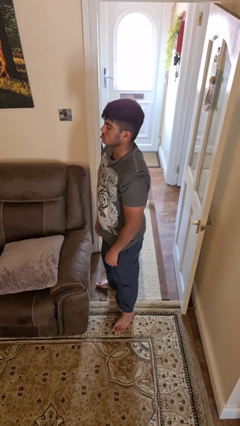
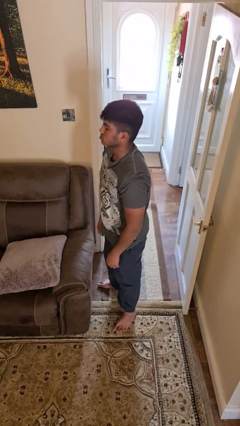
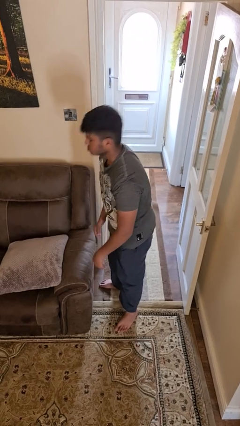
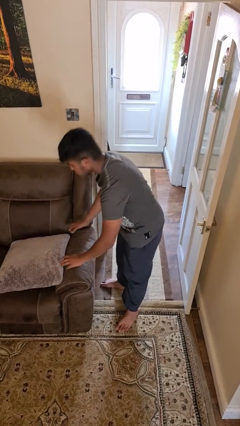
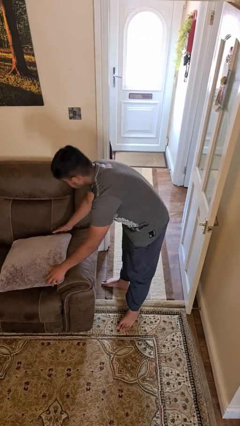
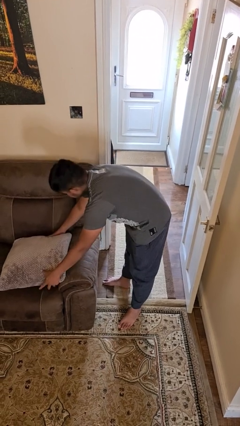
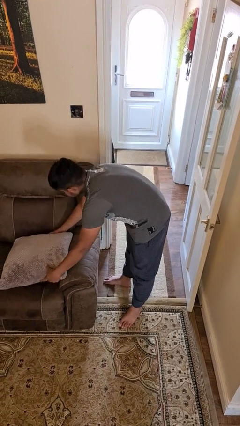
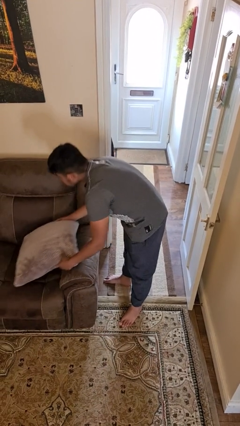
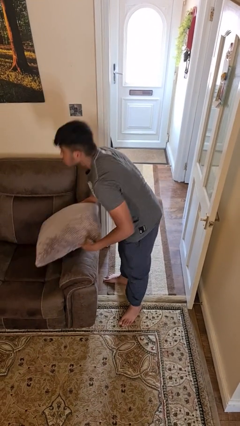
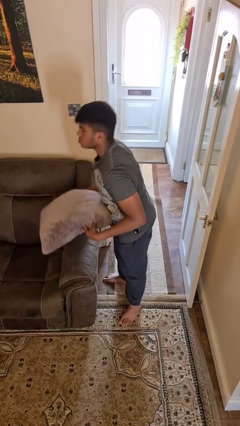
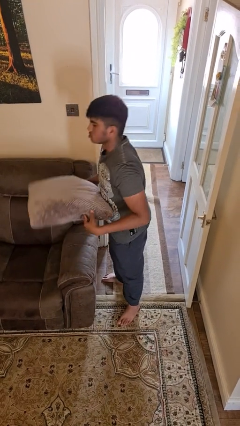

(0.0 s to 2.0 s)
person picks up object from couch

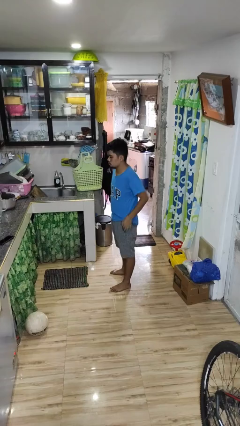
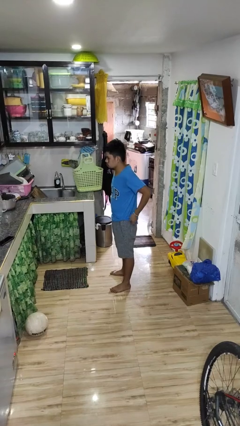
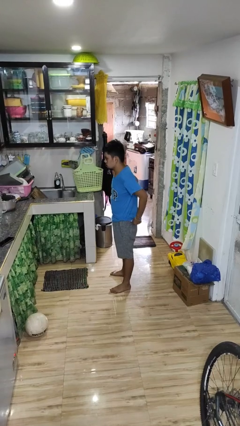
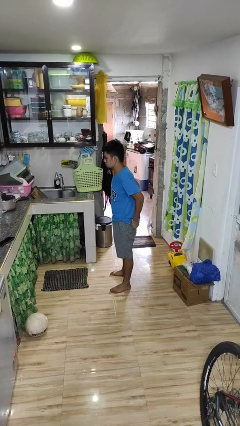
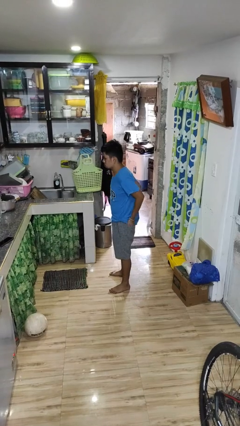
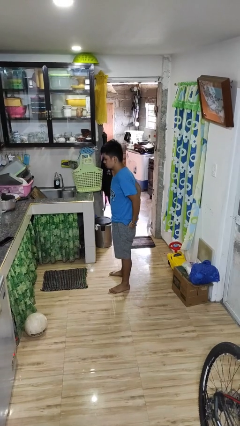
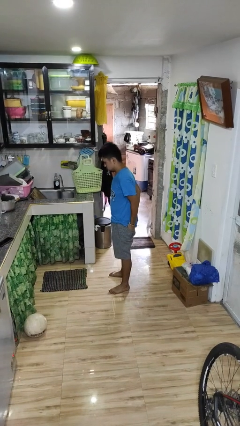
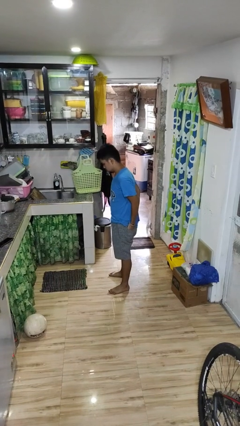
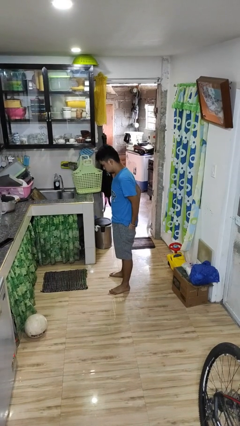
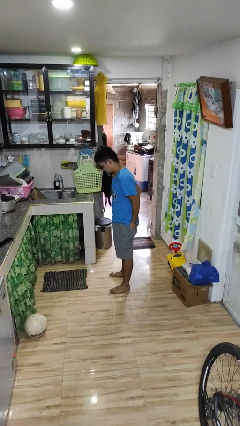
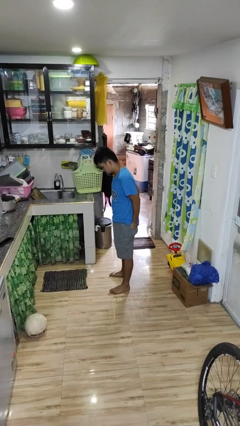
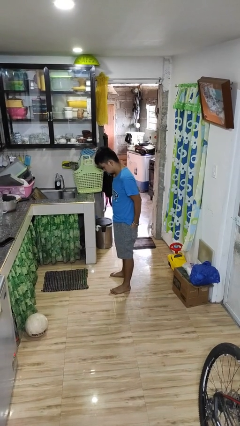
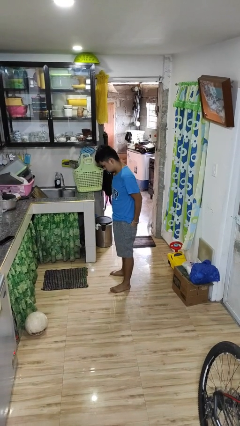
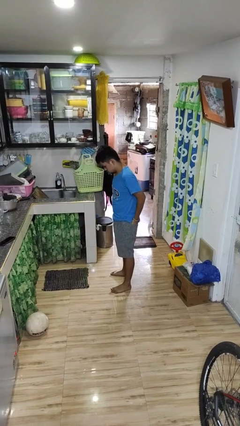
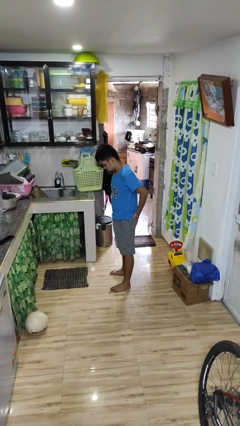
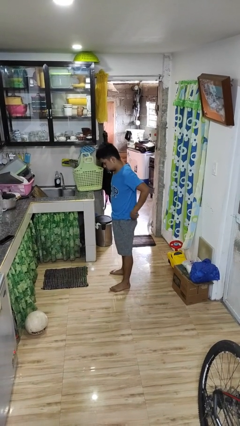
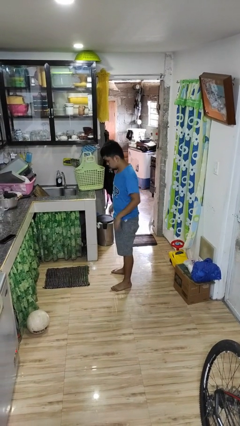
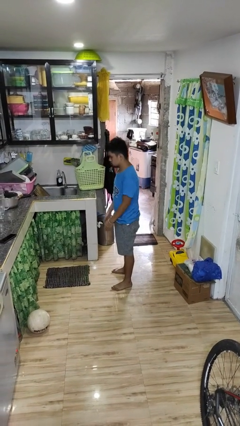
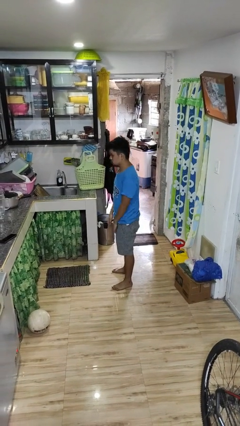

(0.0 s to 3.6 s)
person puts hands in back pockets

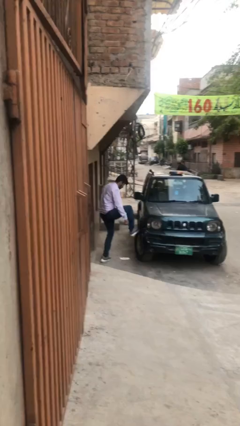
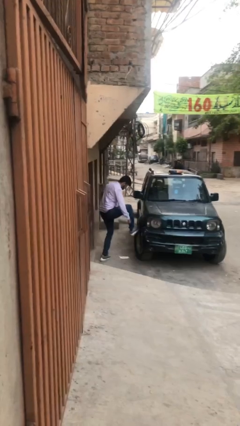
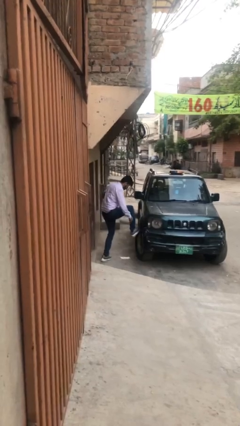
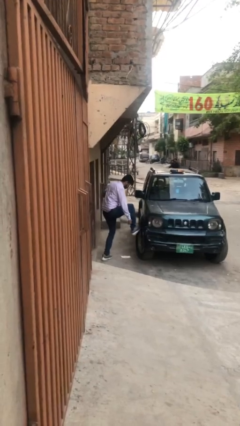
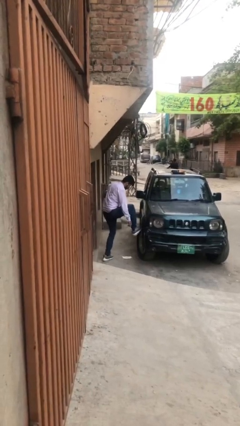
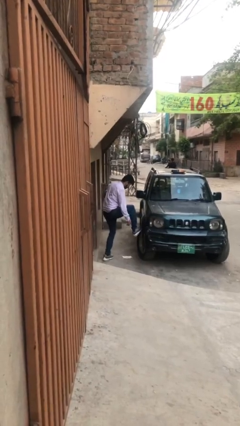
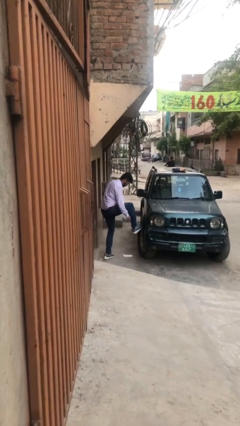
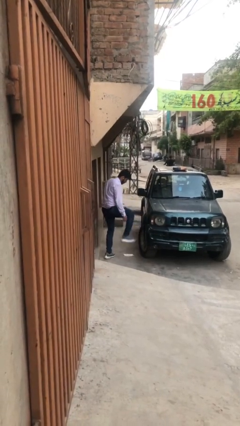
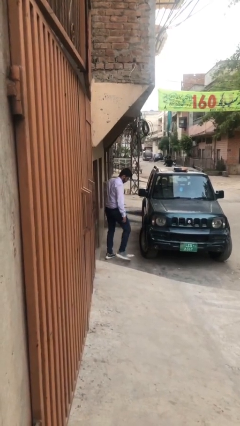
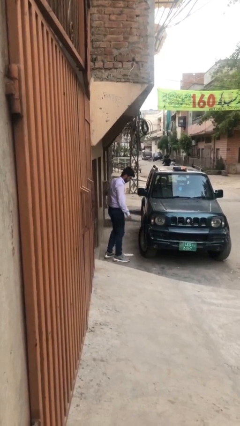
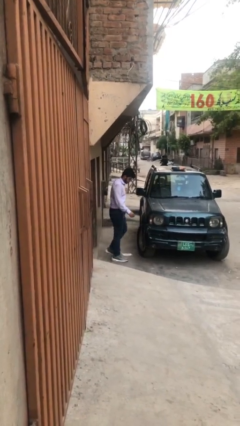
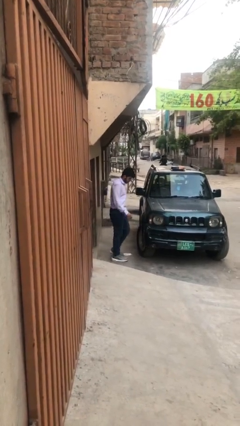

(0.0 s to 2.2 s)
person kicks car tires

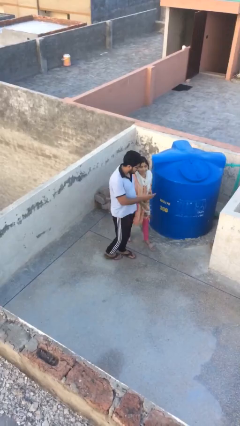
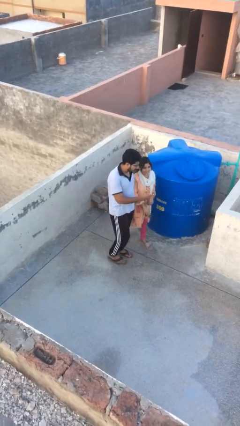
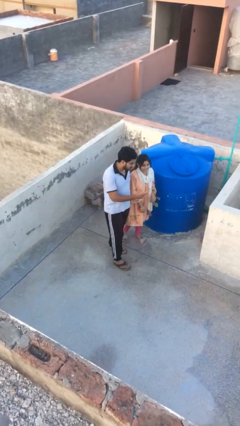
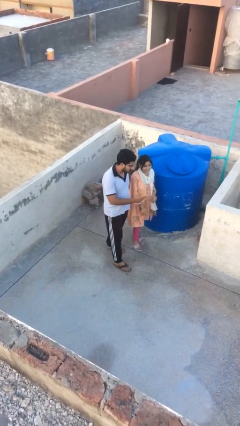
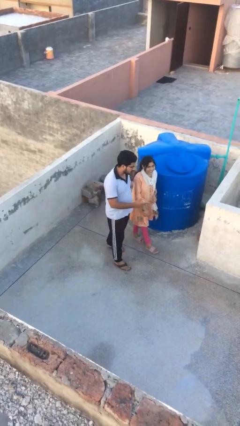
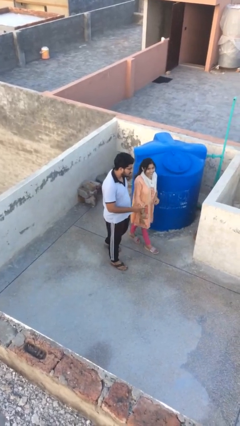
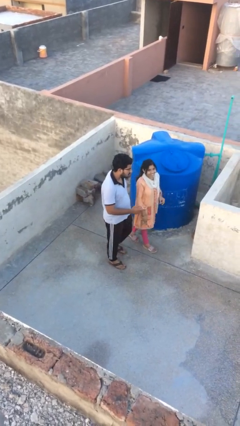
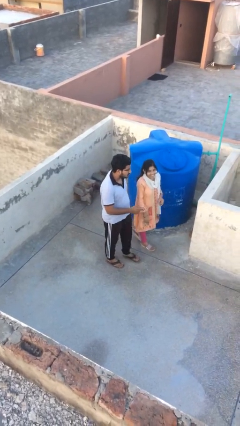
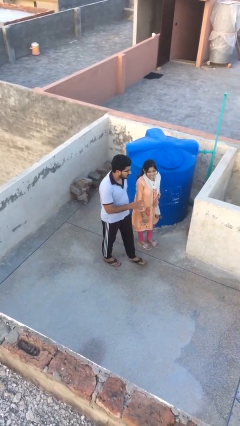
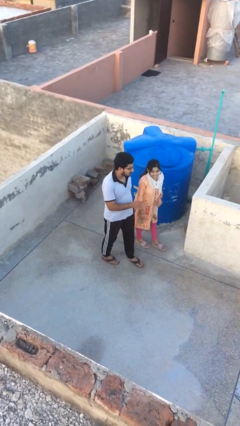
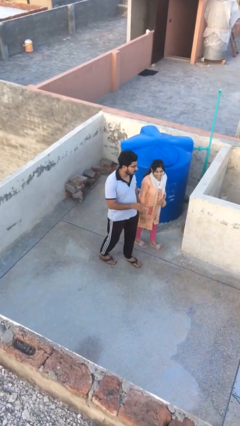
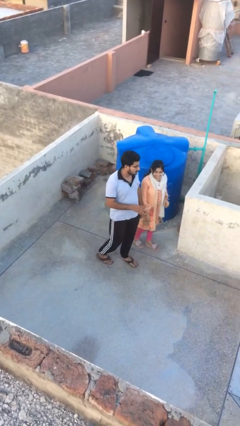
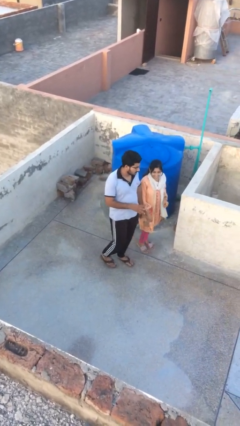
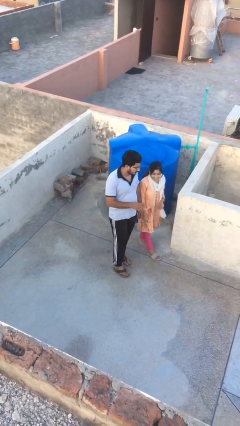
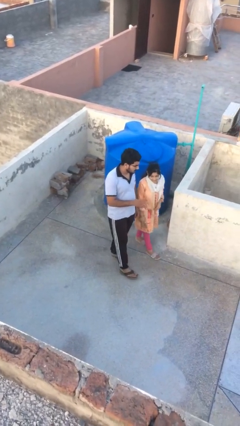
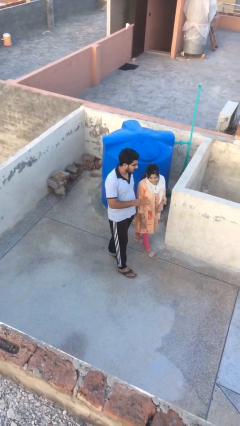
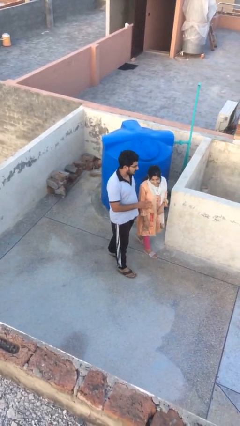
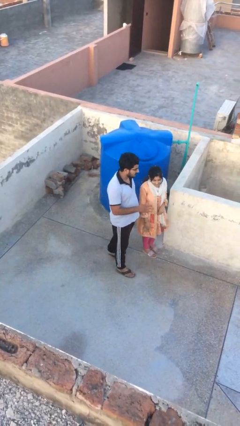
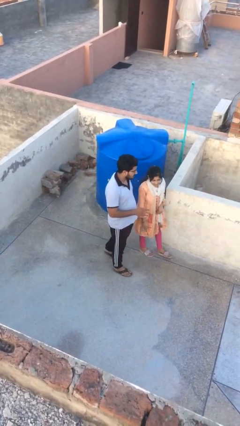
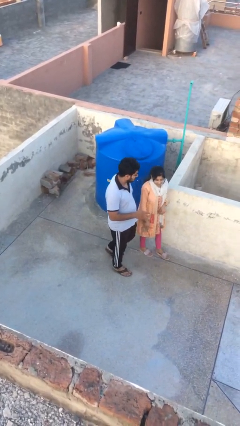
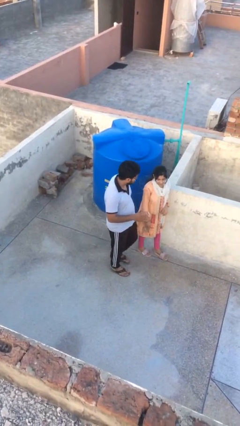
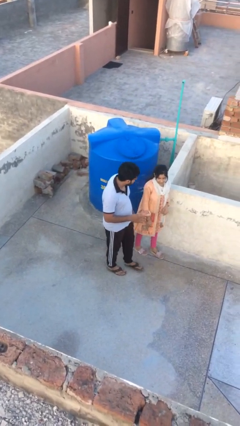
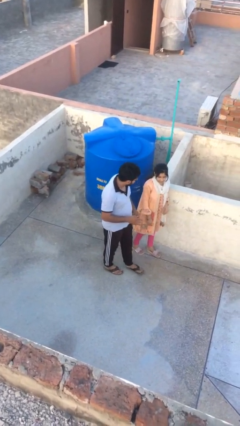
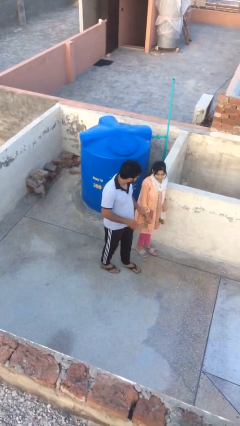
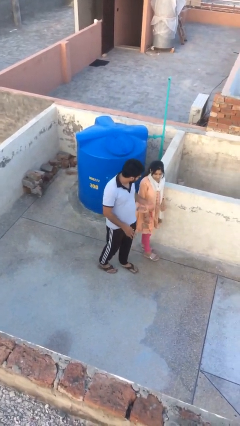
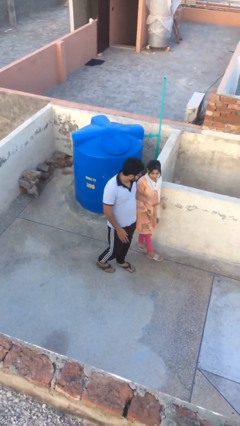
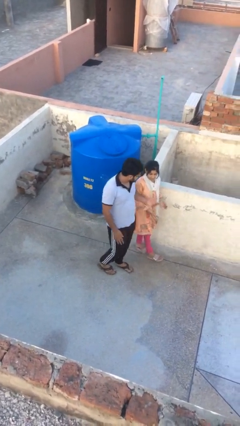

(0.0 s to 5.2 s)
person talks to person

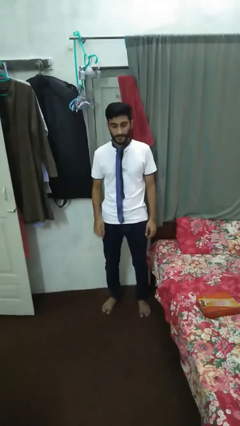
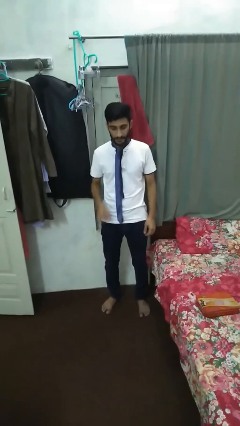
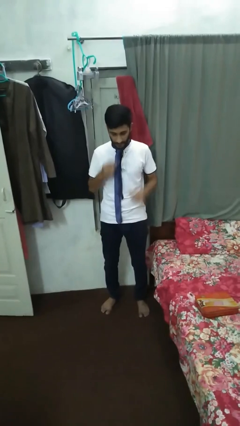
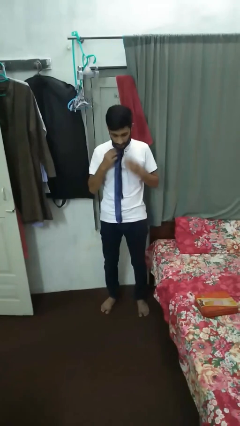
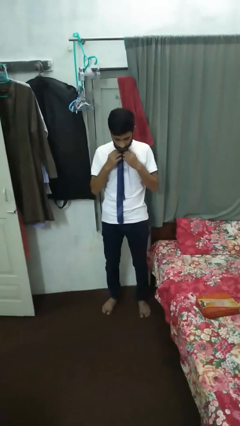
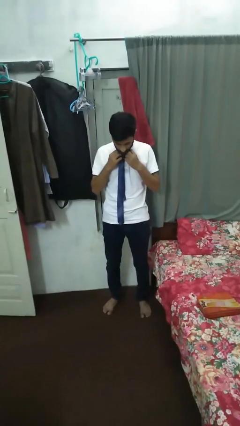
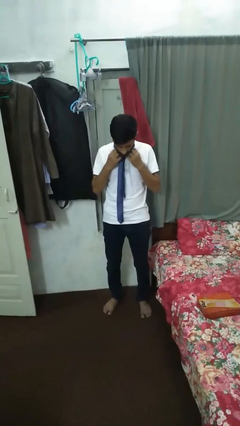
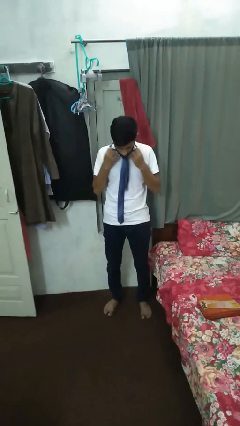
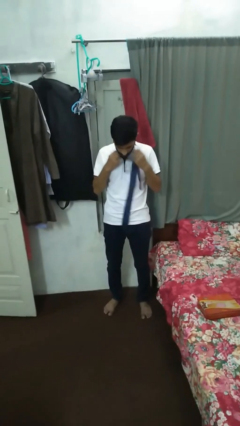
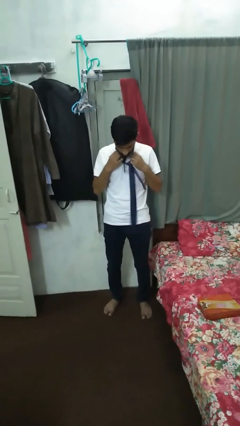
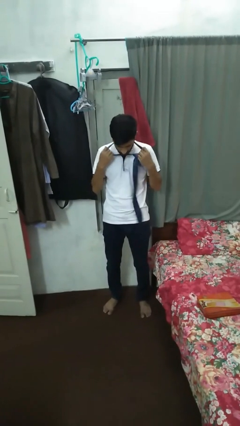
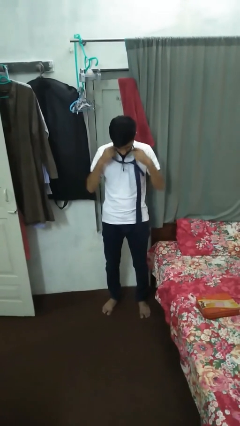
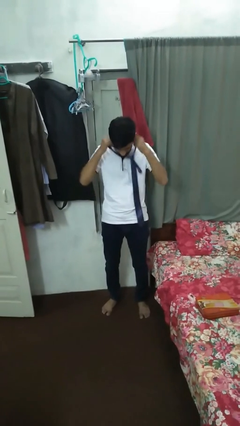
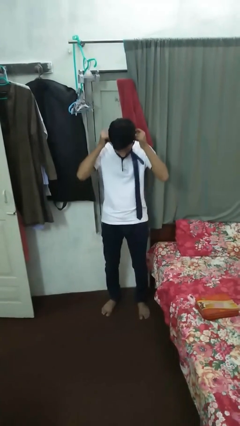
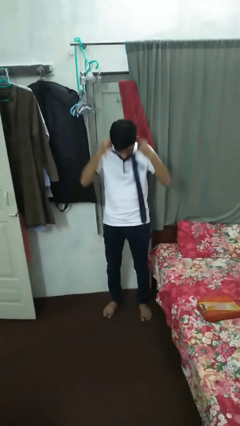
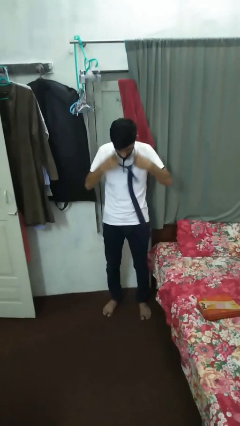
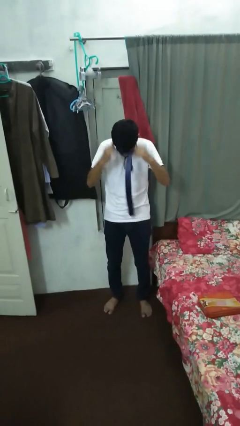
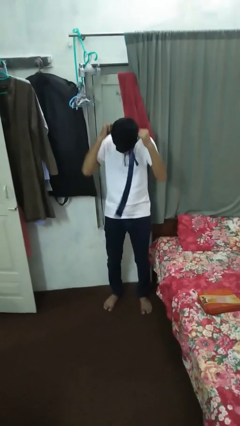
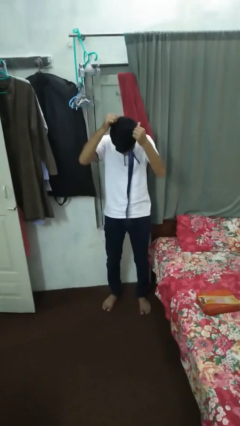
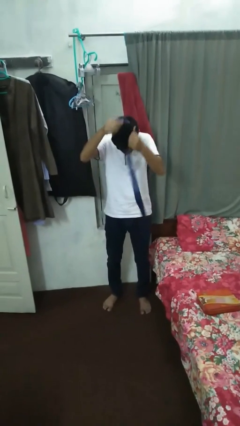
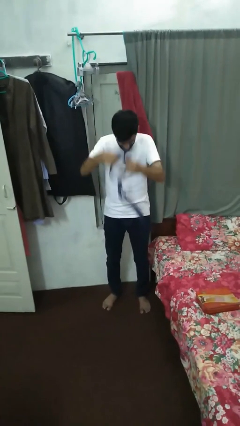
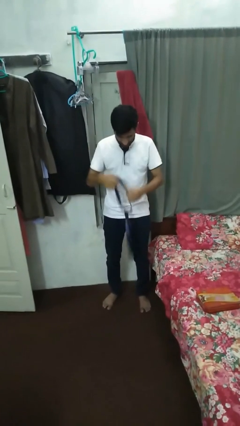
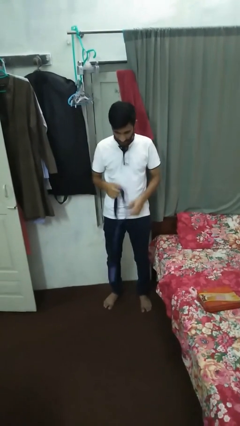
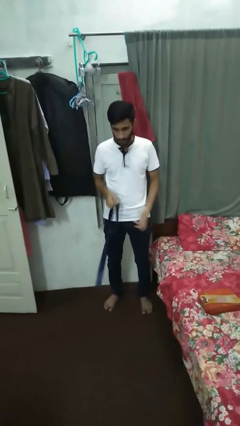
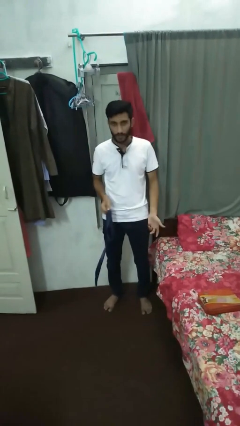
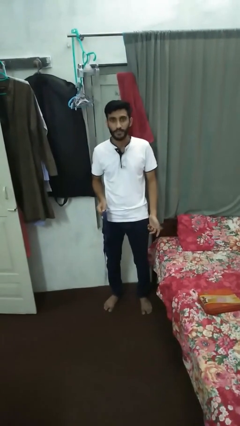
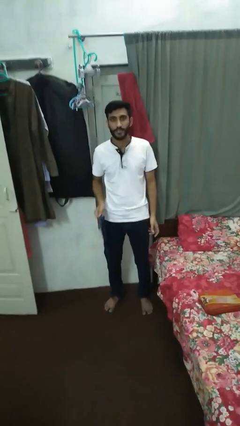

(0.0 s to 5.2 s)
person takes off necktie
